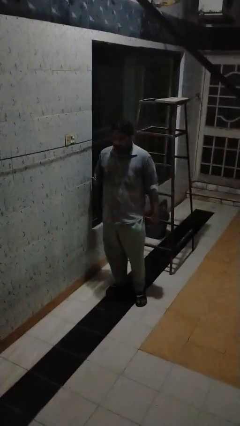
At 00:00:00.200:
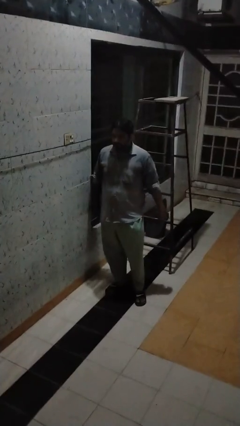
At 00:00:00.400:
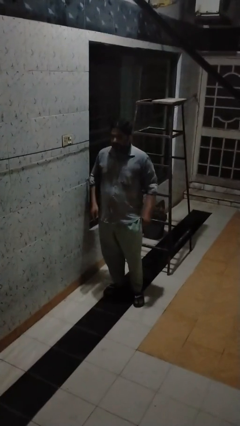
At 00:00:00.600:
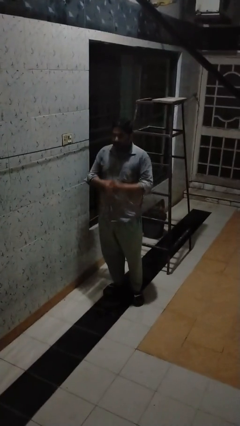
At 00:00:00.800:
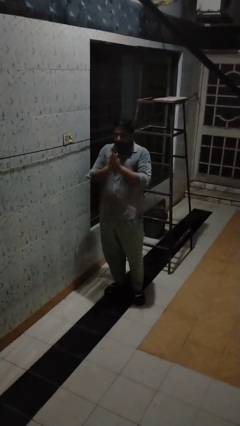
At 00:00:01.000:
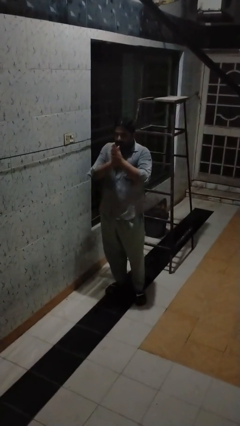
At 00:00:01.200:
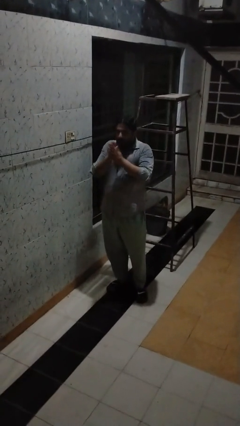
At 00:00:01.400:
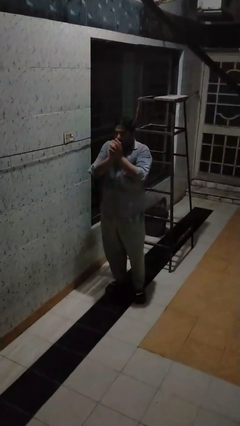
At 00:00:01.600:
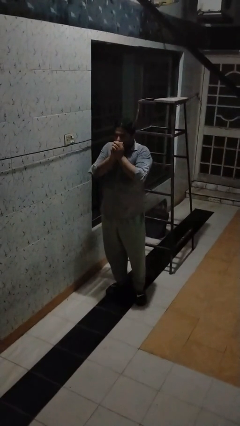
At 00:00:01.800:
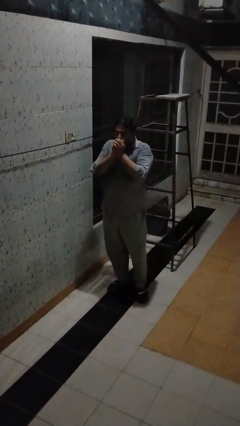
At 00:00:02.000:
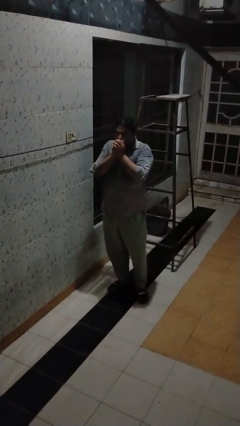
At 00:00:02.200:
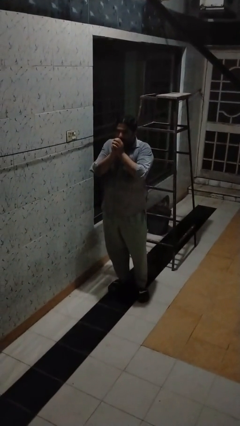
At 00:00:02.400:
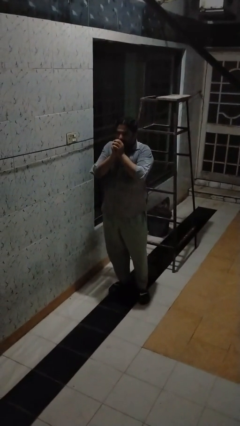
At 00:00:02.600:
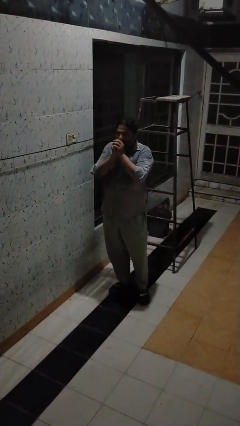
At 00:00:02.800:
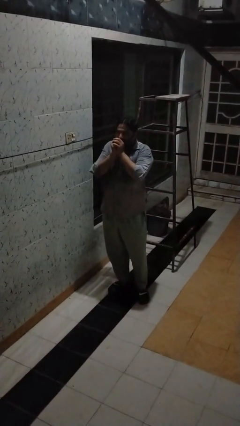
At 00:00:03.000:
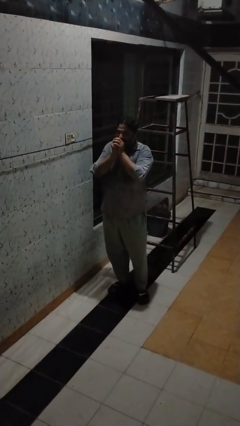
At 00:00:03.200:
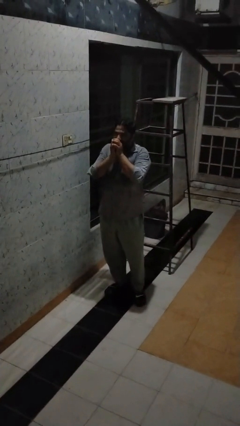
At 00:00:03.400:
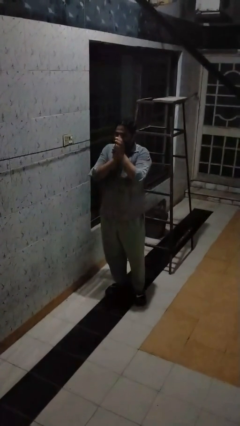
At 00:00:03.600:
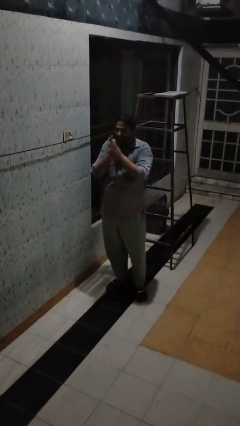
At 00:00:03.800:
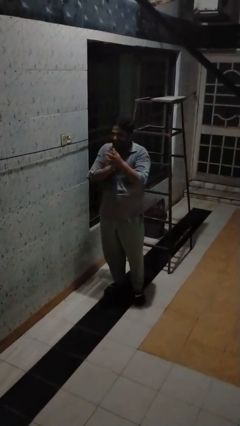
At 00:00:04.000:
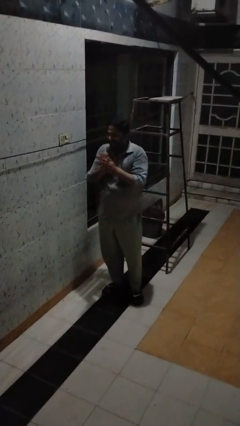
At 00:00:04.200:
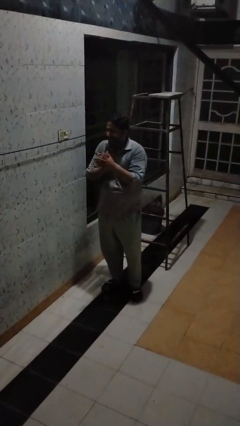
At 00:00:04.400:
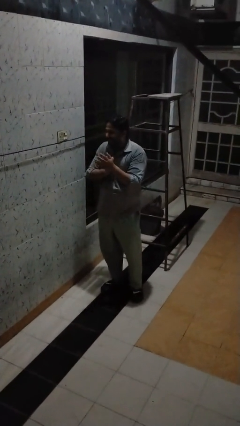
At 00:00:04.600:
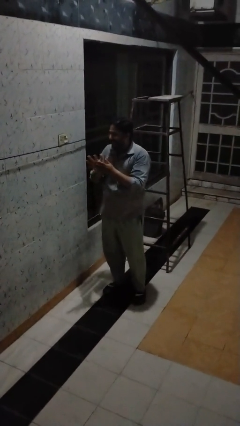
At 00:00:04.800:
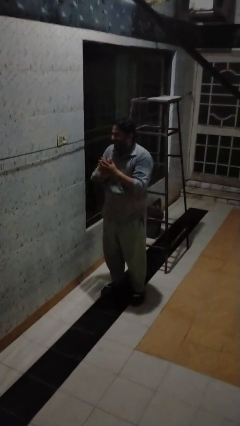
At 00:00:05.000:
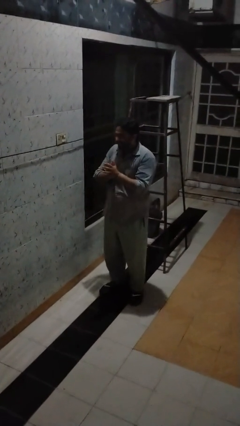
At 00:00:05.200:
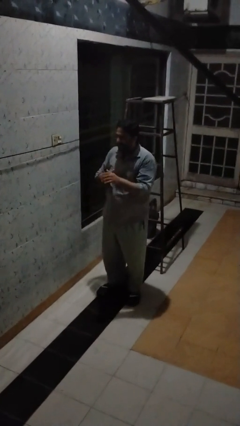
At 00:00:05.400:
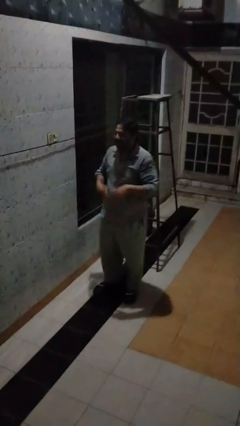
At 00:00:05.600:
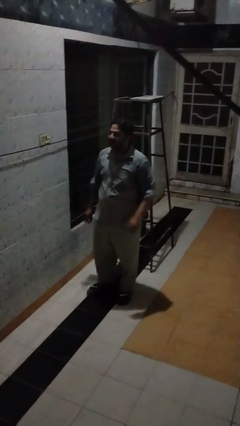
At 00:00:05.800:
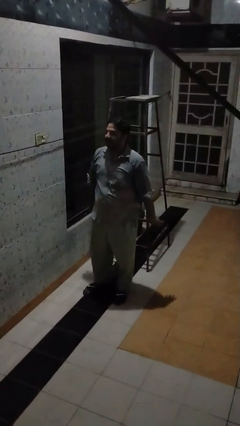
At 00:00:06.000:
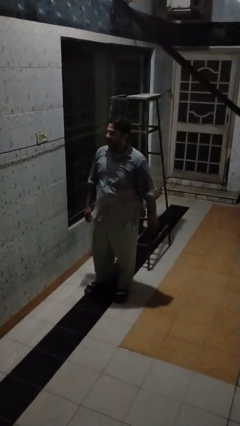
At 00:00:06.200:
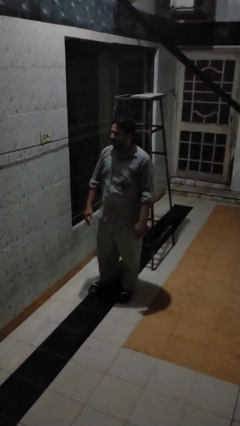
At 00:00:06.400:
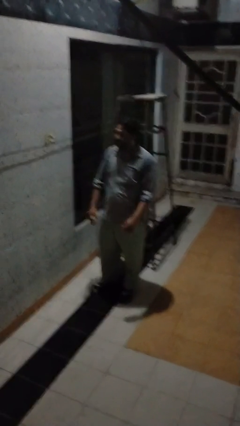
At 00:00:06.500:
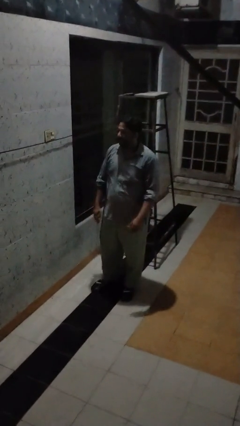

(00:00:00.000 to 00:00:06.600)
person blows into hands

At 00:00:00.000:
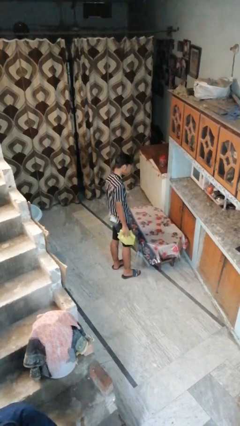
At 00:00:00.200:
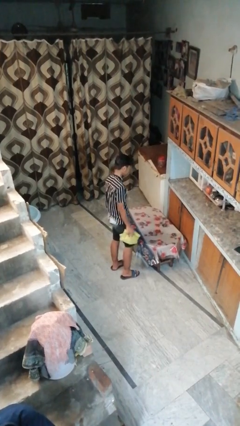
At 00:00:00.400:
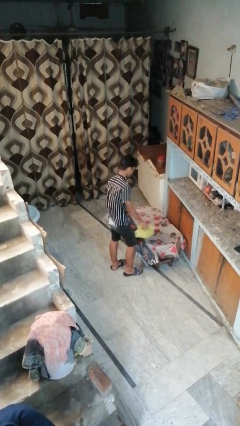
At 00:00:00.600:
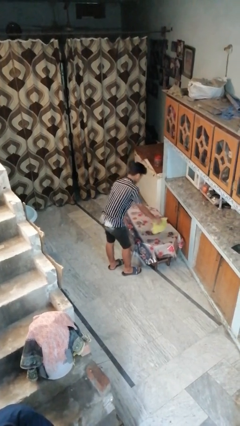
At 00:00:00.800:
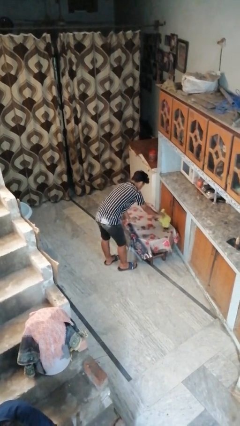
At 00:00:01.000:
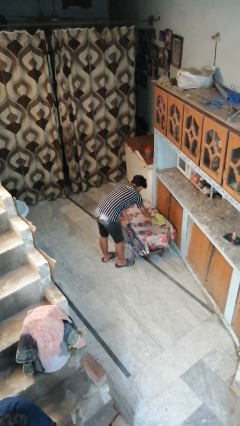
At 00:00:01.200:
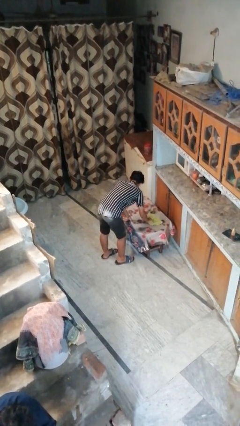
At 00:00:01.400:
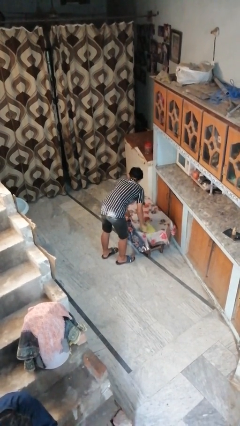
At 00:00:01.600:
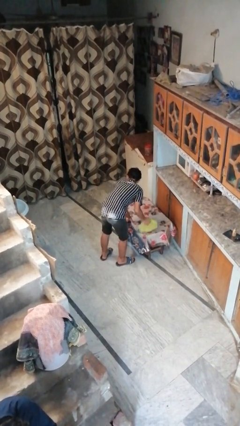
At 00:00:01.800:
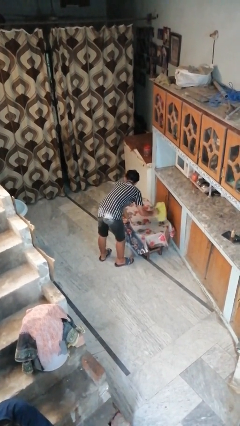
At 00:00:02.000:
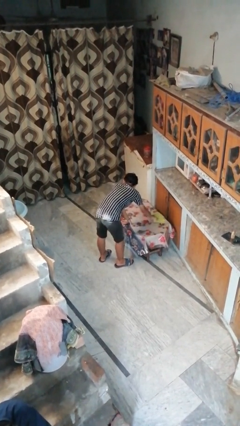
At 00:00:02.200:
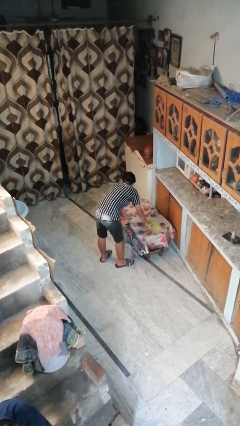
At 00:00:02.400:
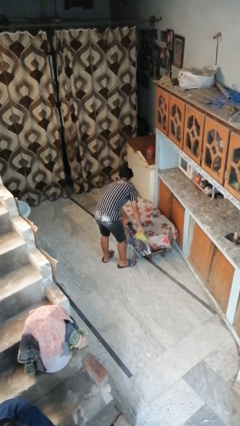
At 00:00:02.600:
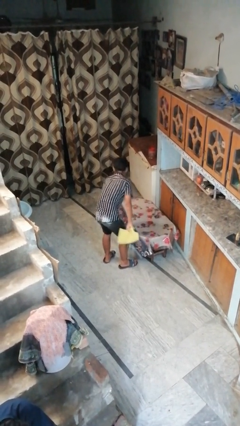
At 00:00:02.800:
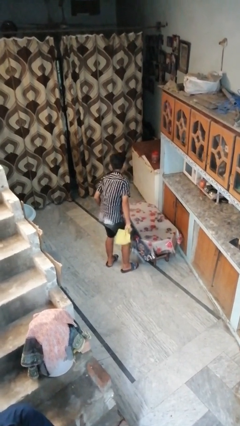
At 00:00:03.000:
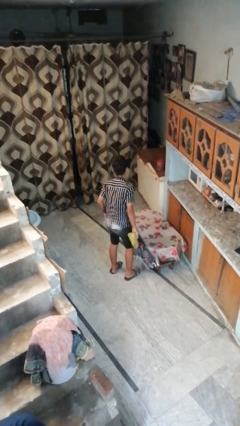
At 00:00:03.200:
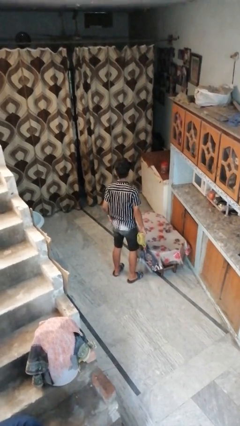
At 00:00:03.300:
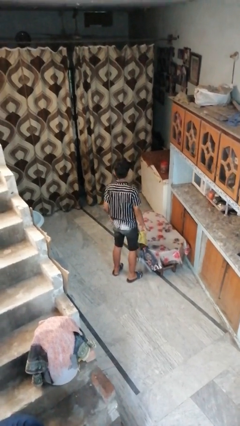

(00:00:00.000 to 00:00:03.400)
person cleans table with rag

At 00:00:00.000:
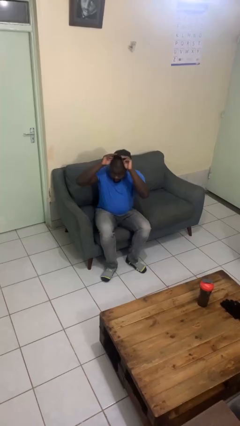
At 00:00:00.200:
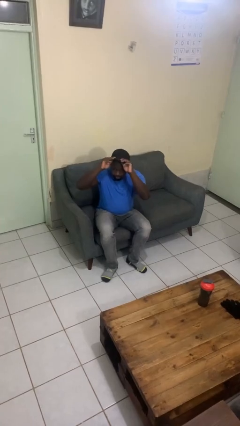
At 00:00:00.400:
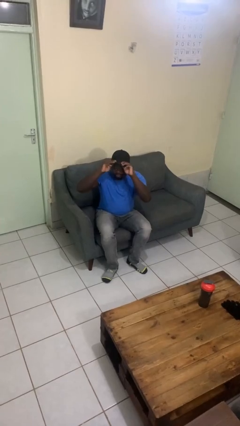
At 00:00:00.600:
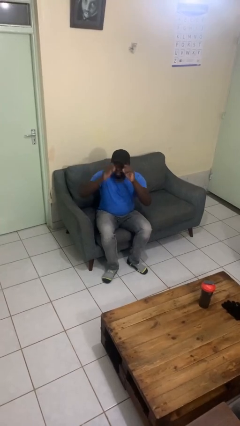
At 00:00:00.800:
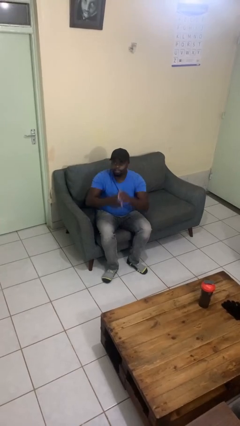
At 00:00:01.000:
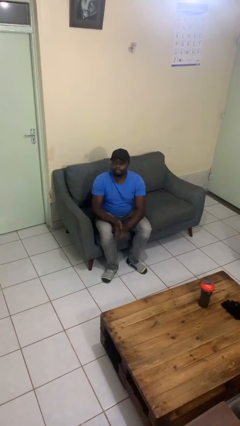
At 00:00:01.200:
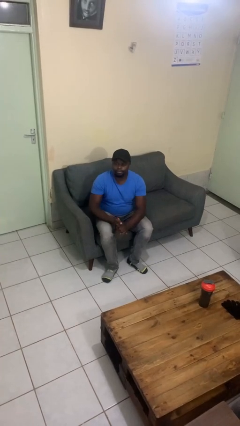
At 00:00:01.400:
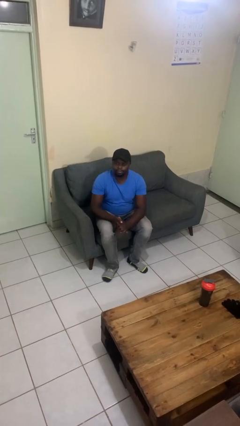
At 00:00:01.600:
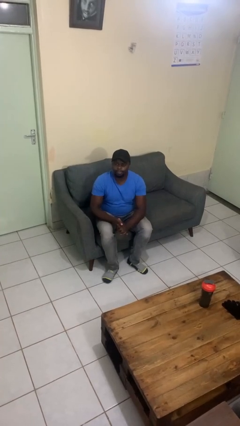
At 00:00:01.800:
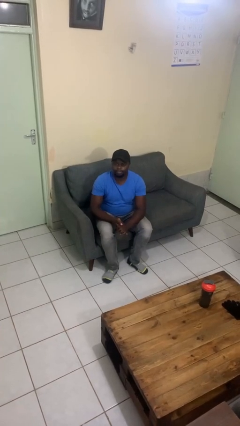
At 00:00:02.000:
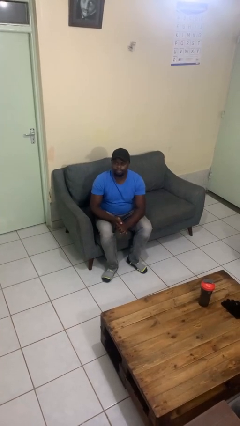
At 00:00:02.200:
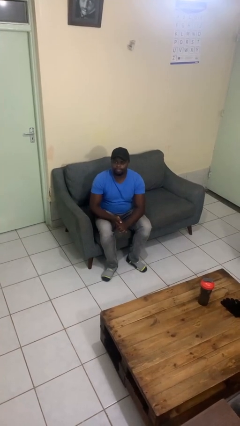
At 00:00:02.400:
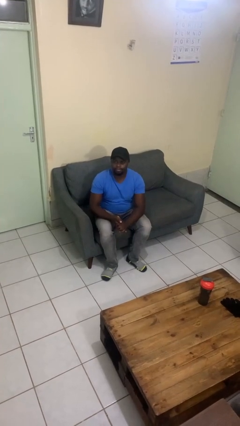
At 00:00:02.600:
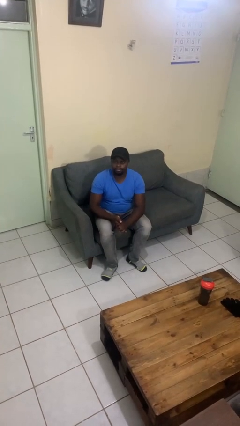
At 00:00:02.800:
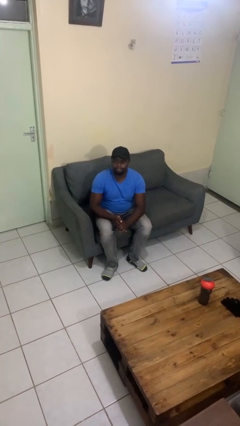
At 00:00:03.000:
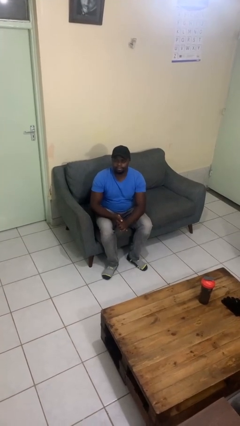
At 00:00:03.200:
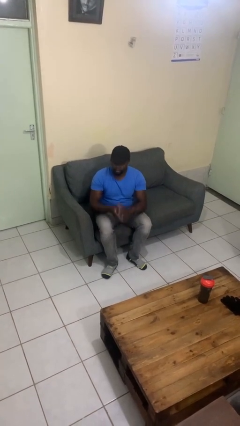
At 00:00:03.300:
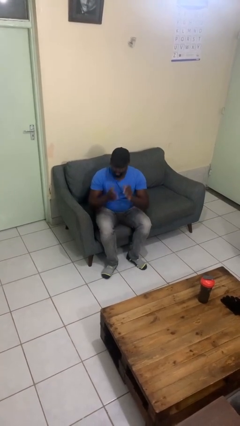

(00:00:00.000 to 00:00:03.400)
person puts on hat

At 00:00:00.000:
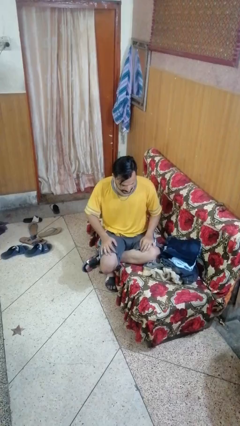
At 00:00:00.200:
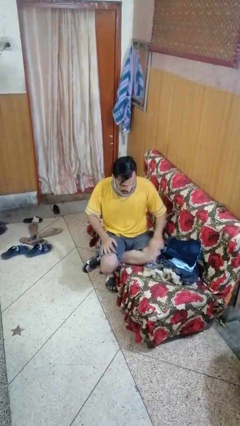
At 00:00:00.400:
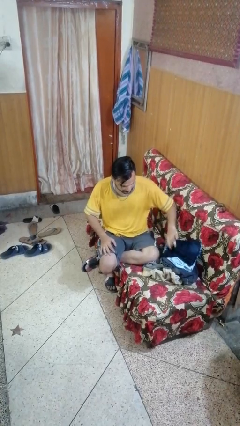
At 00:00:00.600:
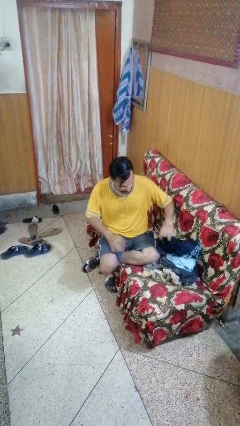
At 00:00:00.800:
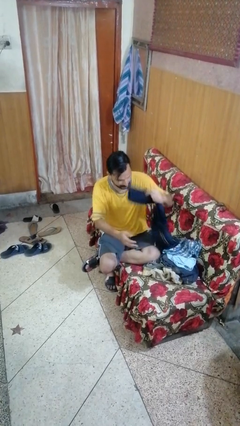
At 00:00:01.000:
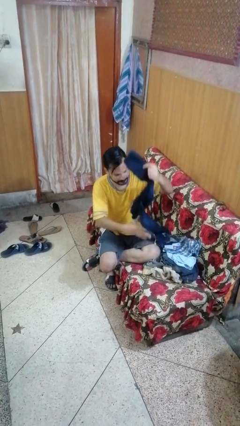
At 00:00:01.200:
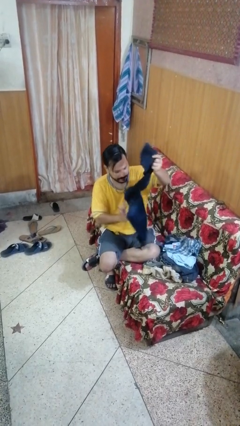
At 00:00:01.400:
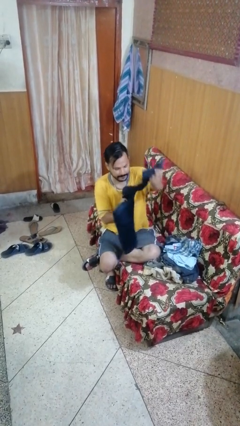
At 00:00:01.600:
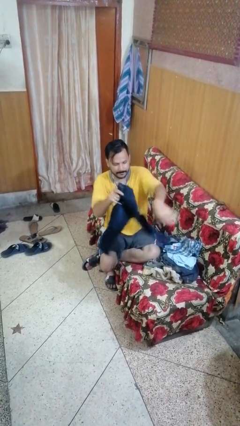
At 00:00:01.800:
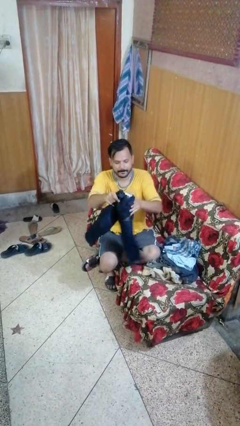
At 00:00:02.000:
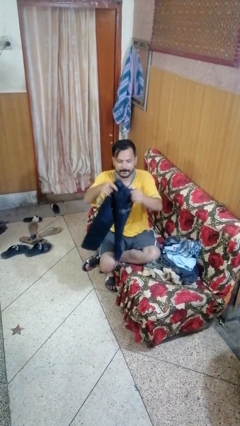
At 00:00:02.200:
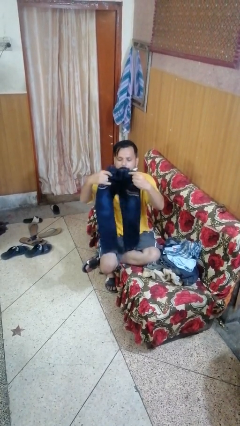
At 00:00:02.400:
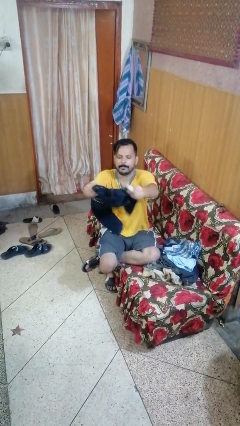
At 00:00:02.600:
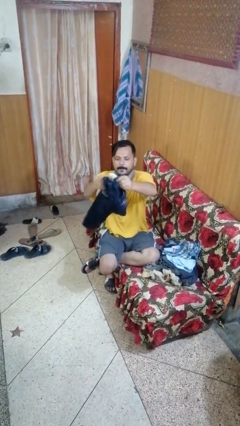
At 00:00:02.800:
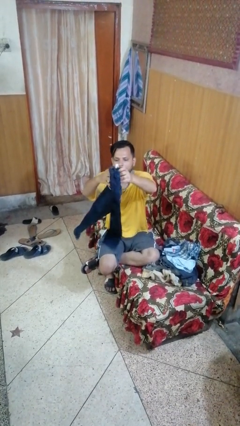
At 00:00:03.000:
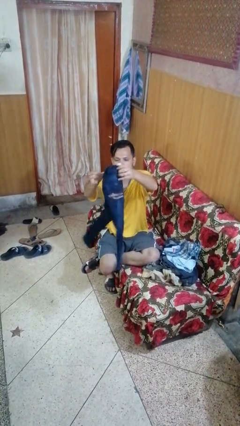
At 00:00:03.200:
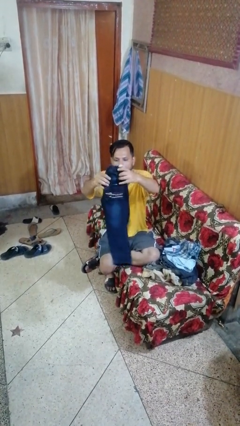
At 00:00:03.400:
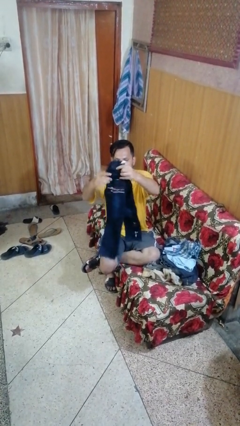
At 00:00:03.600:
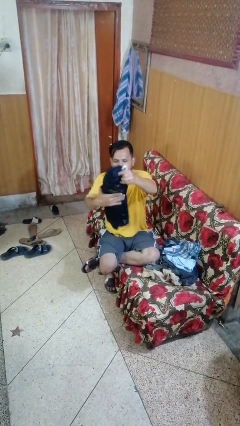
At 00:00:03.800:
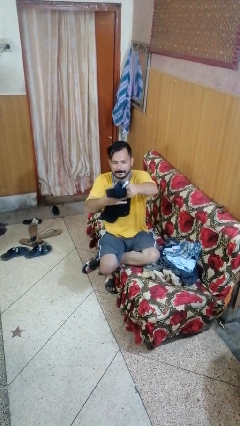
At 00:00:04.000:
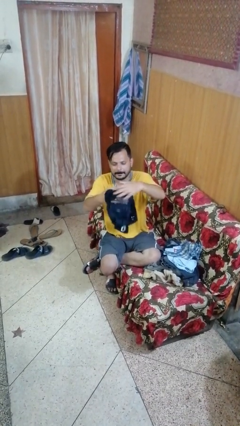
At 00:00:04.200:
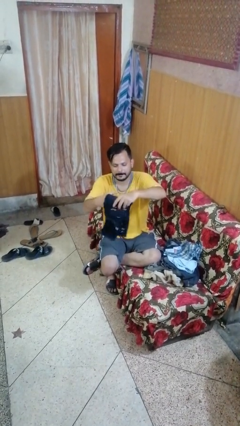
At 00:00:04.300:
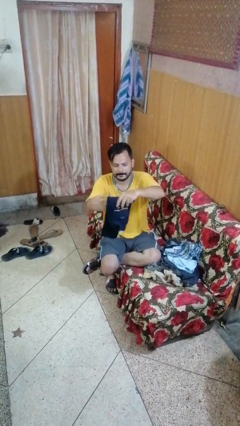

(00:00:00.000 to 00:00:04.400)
person folds pants
